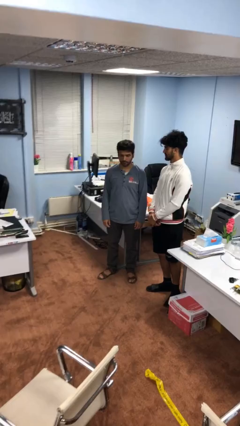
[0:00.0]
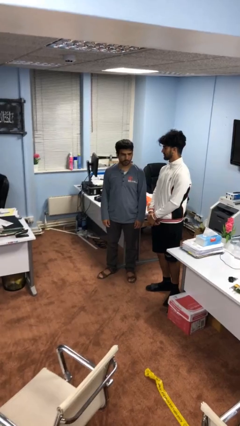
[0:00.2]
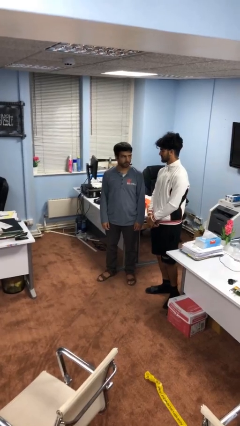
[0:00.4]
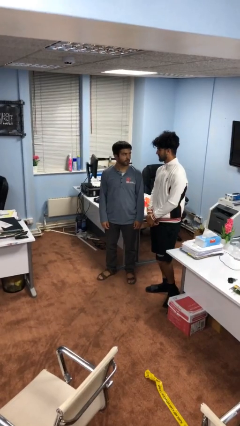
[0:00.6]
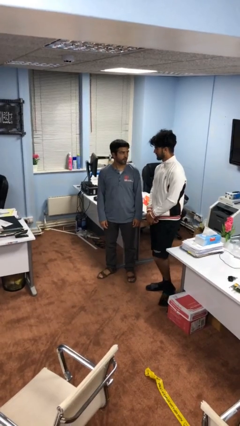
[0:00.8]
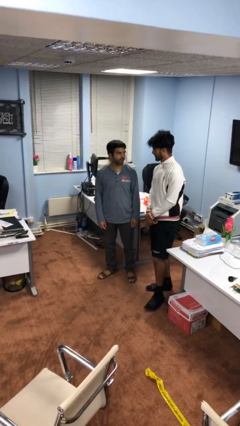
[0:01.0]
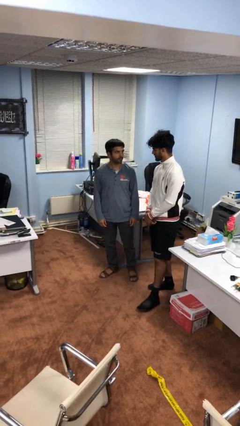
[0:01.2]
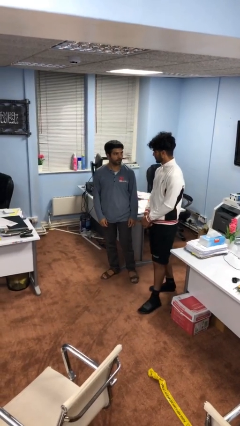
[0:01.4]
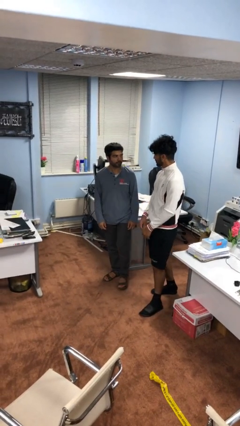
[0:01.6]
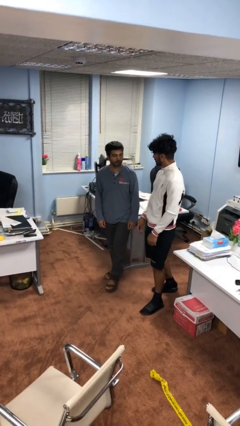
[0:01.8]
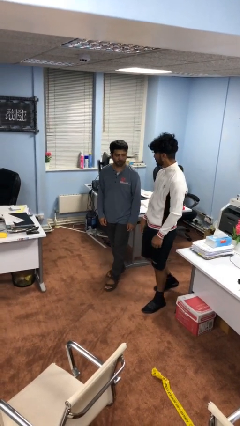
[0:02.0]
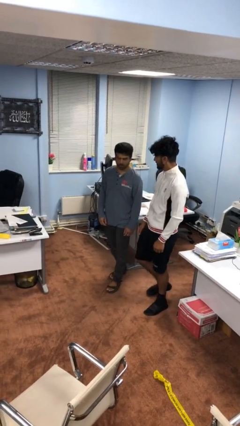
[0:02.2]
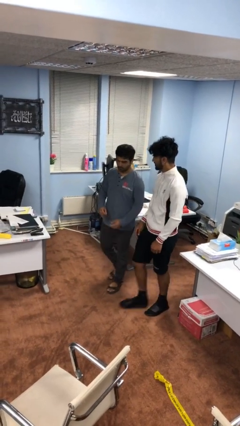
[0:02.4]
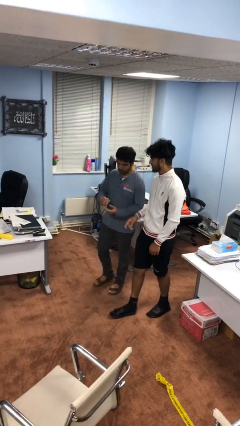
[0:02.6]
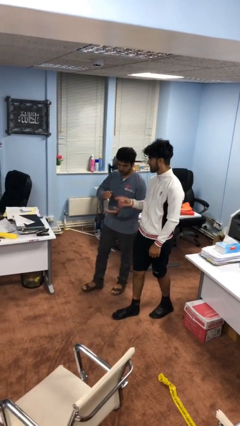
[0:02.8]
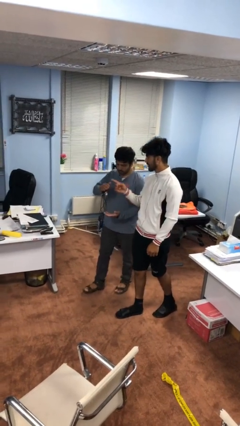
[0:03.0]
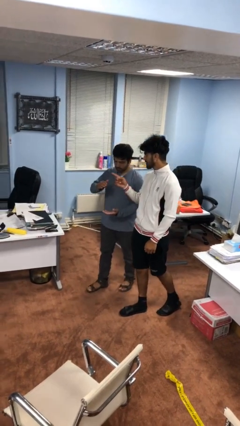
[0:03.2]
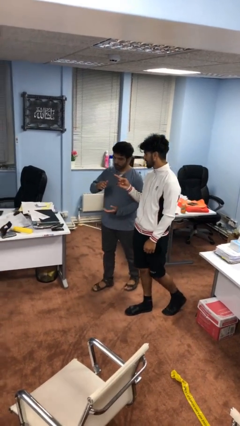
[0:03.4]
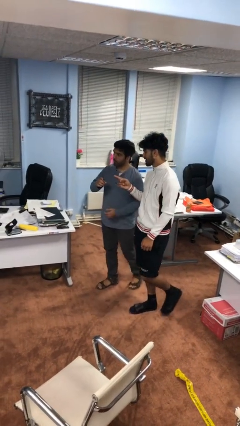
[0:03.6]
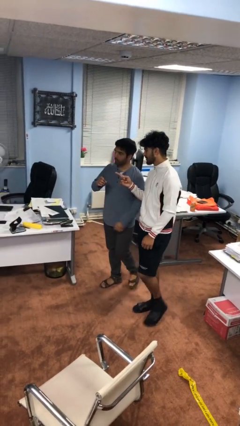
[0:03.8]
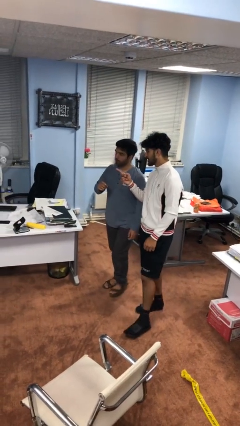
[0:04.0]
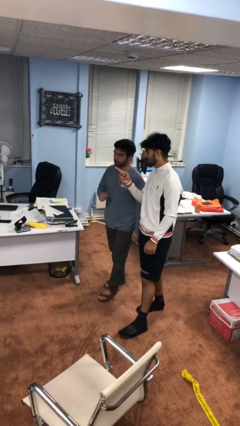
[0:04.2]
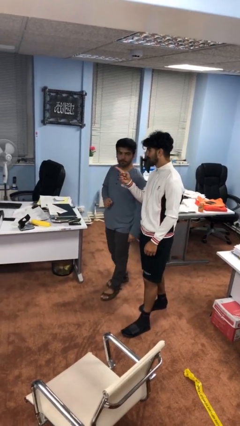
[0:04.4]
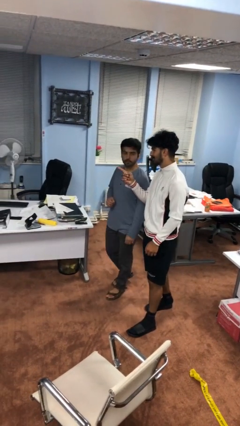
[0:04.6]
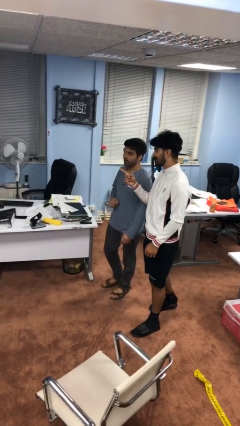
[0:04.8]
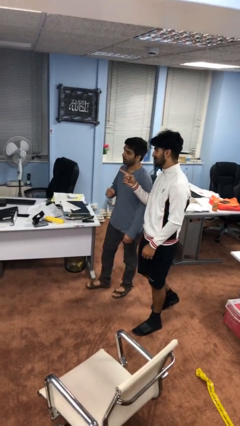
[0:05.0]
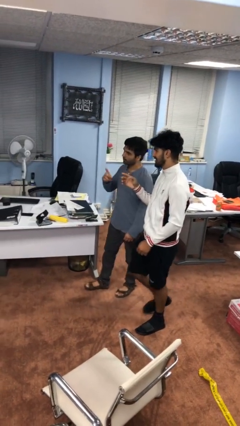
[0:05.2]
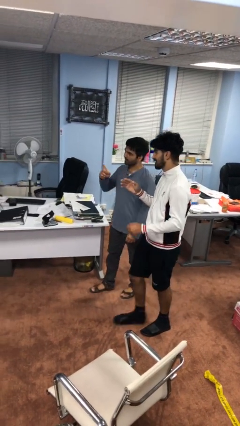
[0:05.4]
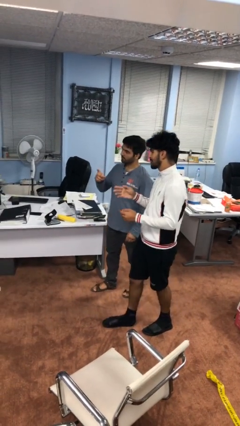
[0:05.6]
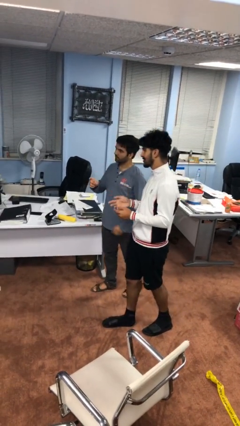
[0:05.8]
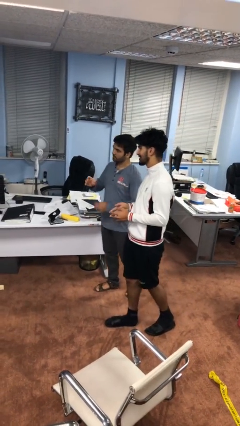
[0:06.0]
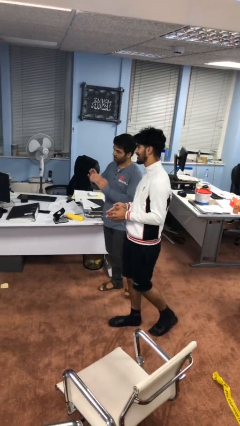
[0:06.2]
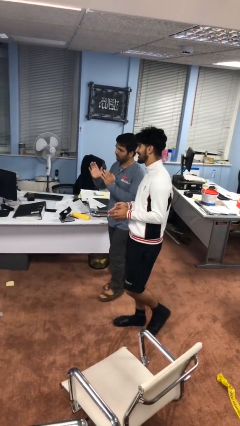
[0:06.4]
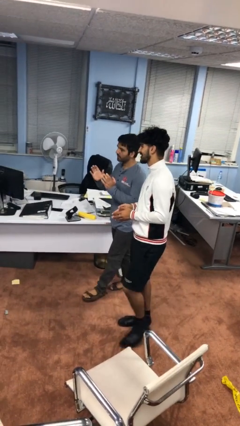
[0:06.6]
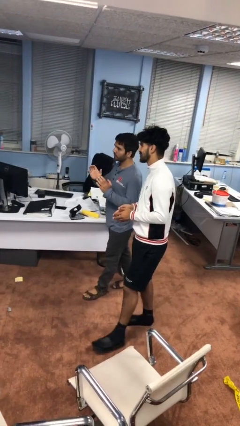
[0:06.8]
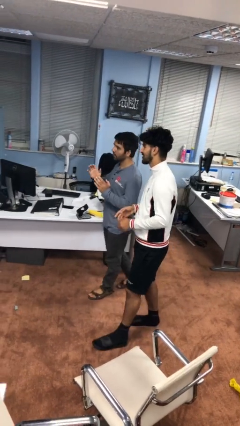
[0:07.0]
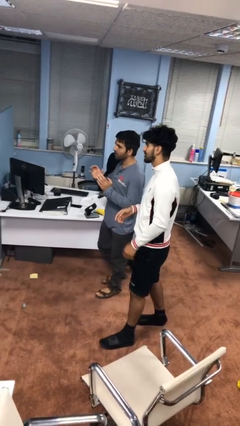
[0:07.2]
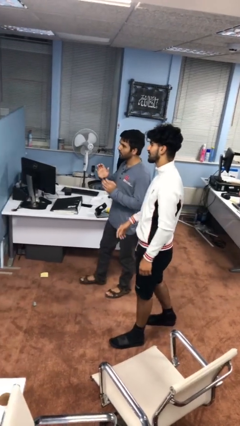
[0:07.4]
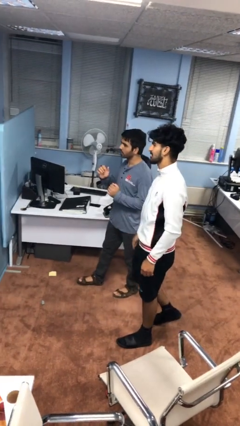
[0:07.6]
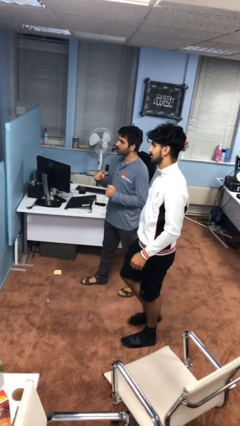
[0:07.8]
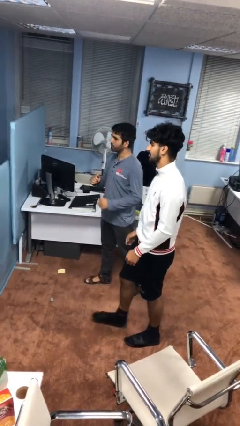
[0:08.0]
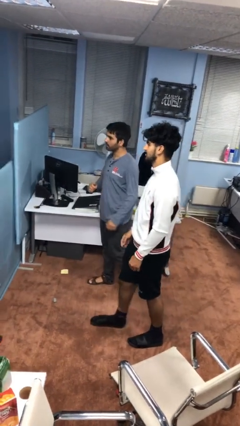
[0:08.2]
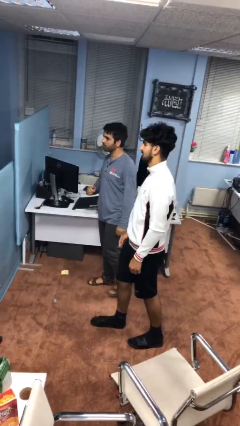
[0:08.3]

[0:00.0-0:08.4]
person talks to person

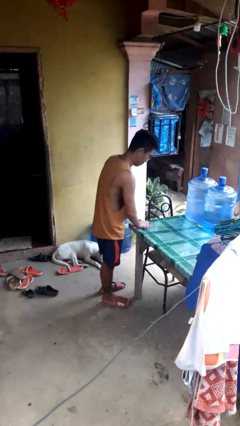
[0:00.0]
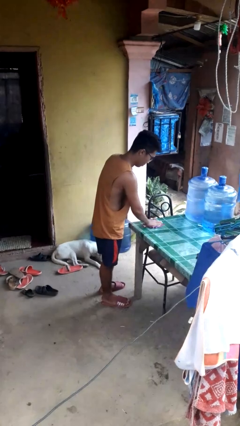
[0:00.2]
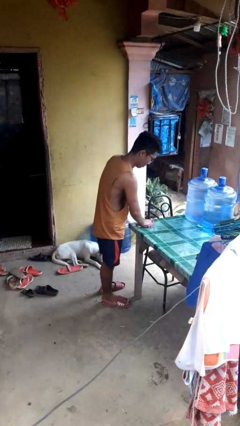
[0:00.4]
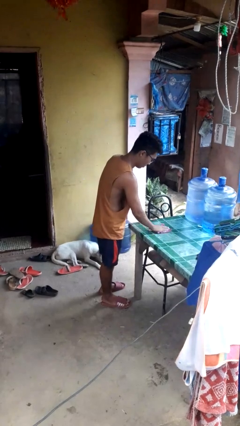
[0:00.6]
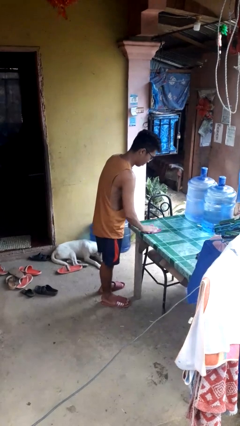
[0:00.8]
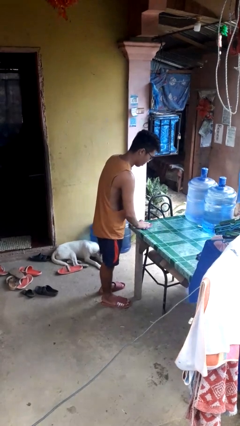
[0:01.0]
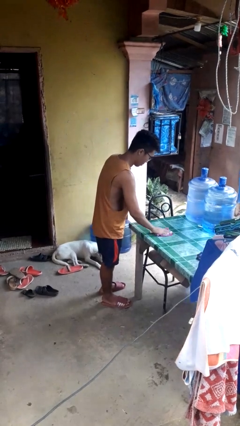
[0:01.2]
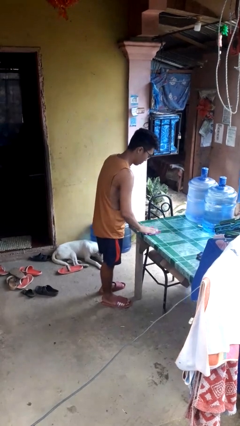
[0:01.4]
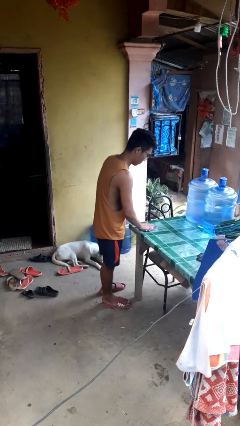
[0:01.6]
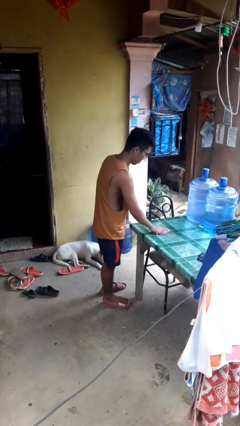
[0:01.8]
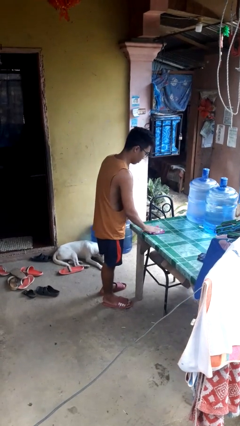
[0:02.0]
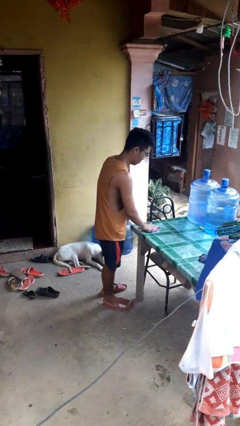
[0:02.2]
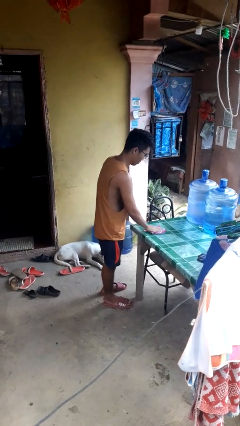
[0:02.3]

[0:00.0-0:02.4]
person cleans table with rag

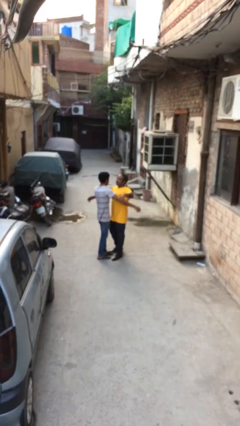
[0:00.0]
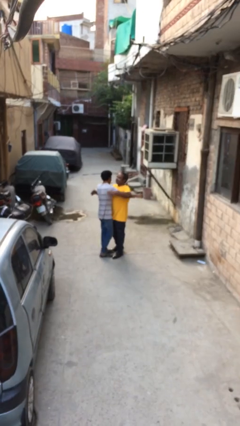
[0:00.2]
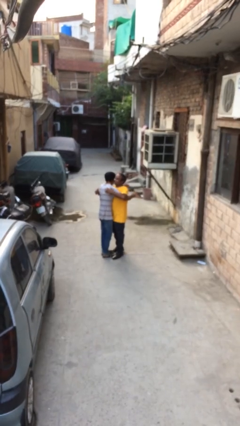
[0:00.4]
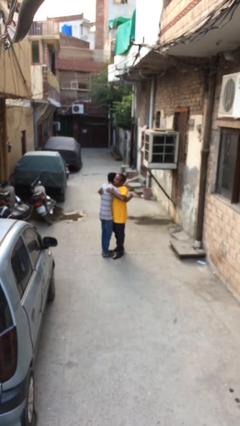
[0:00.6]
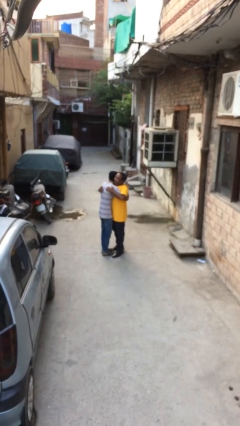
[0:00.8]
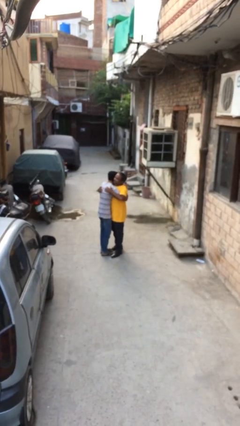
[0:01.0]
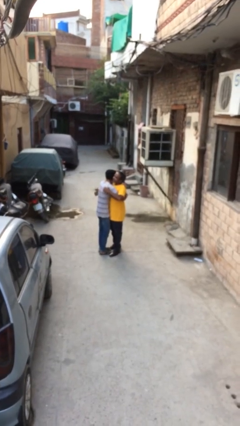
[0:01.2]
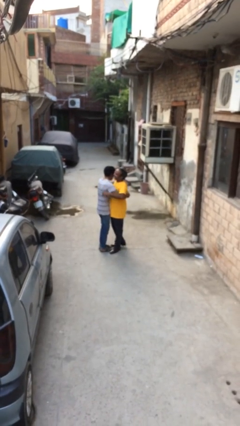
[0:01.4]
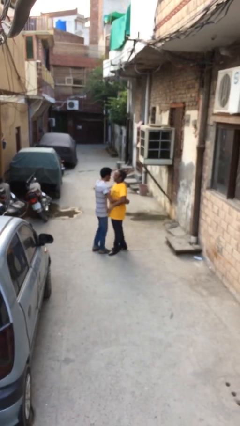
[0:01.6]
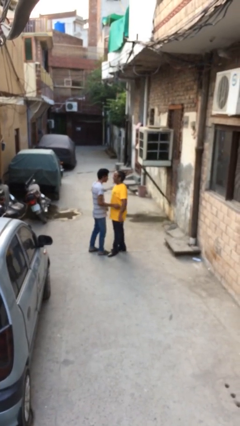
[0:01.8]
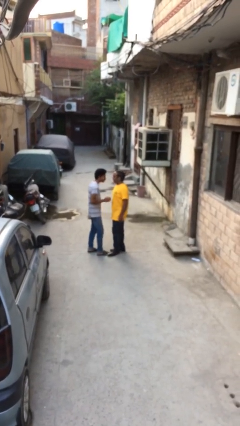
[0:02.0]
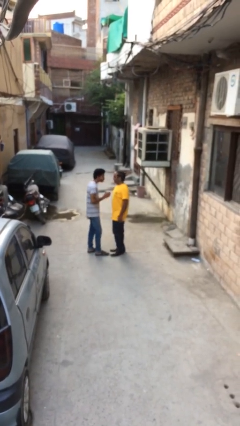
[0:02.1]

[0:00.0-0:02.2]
person embraces person

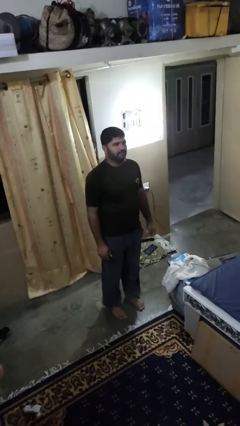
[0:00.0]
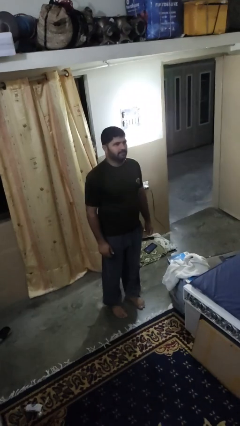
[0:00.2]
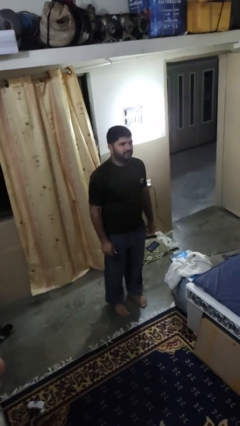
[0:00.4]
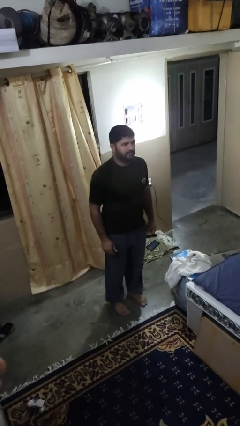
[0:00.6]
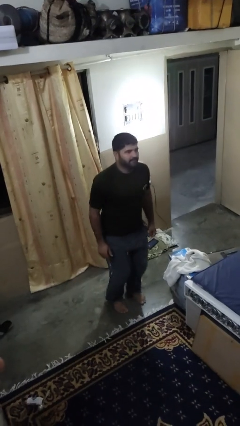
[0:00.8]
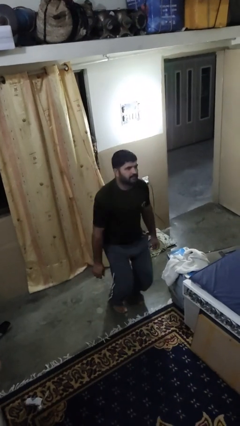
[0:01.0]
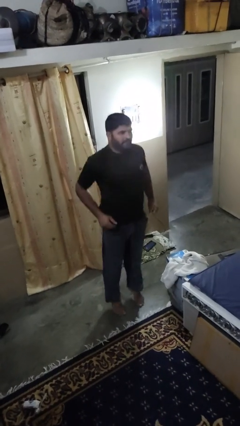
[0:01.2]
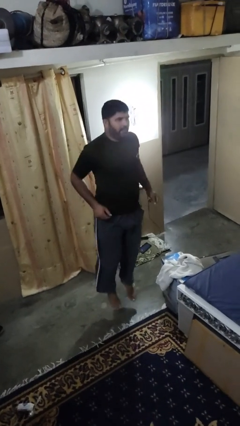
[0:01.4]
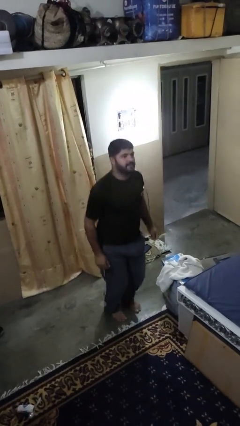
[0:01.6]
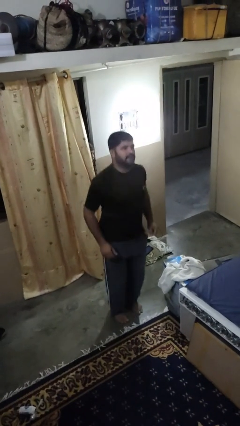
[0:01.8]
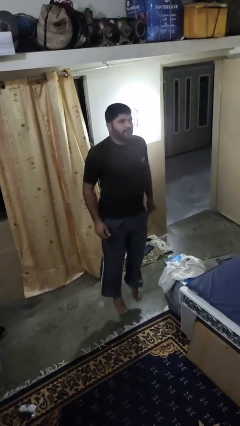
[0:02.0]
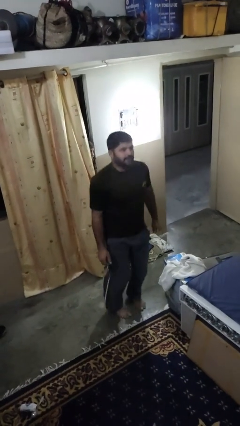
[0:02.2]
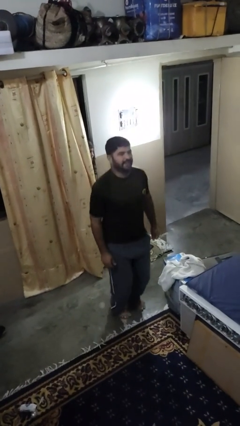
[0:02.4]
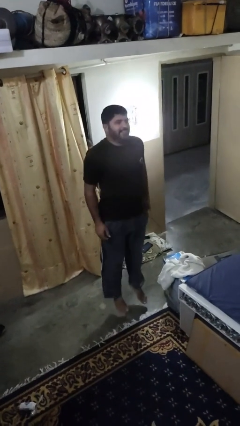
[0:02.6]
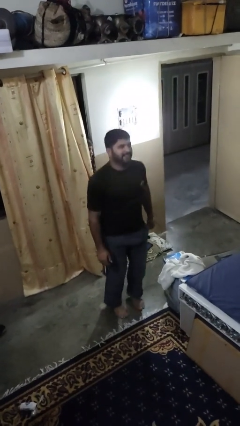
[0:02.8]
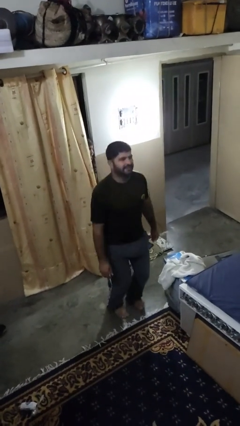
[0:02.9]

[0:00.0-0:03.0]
person jumps

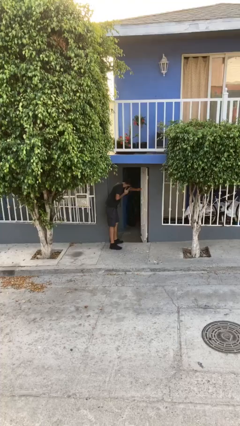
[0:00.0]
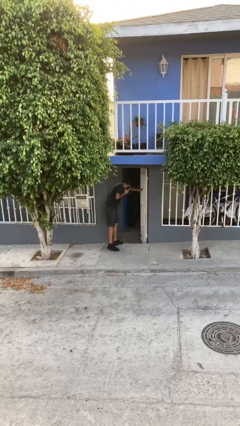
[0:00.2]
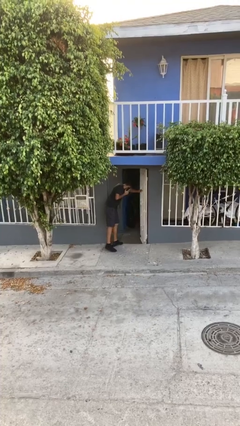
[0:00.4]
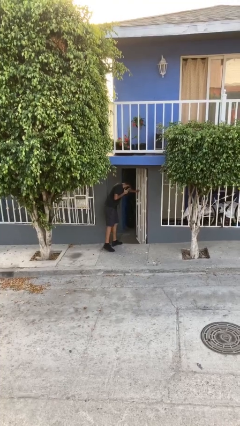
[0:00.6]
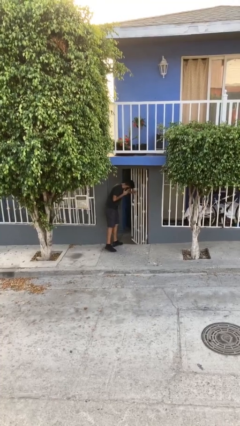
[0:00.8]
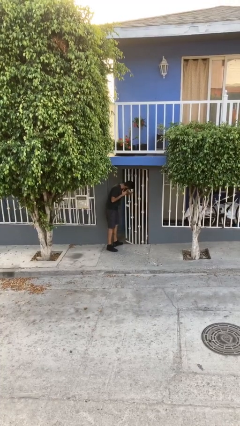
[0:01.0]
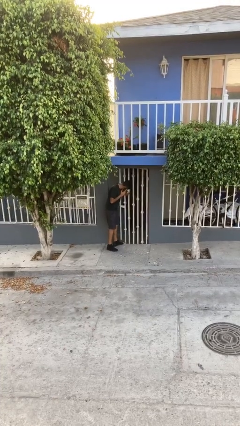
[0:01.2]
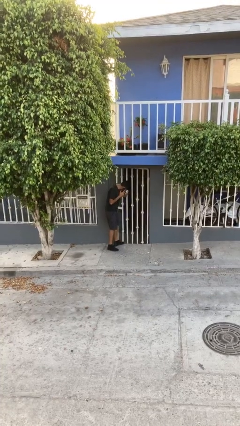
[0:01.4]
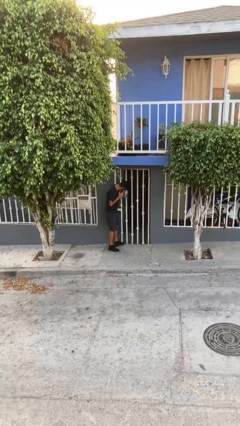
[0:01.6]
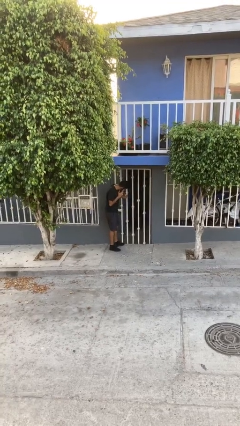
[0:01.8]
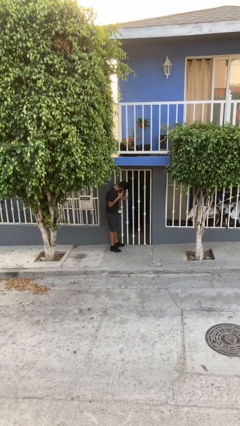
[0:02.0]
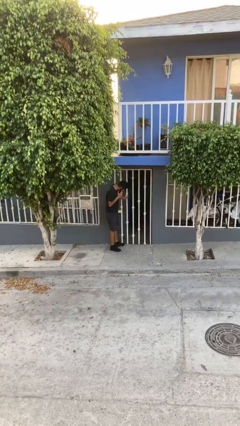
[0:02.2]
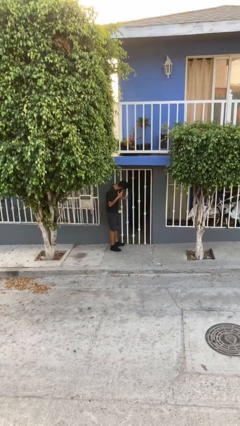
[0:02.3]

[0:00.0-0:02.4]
person closes facility door
